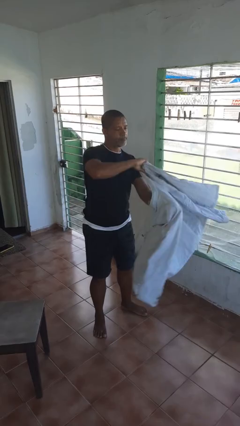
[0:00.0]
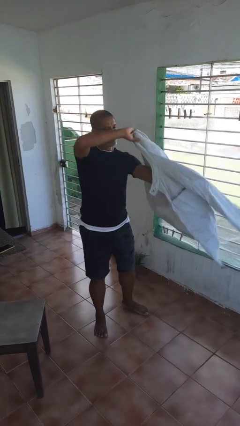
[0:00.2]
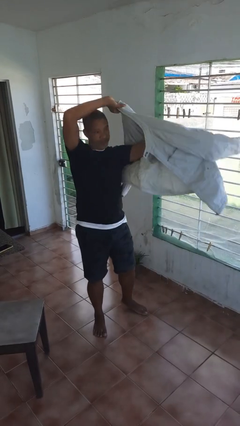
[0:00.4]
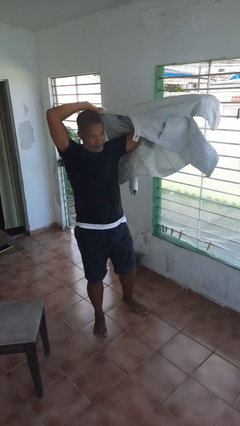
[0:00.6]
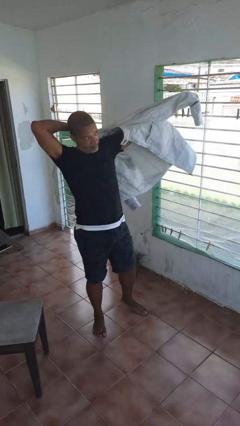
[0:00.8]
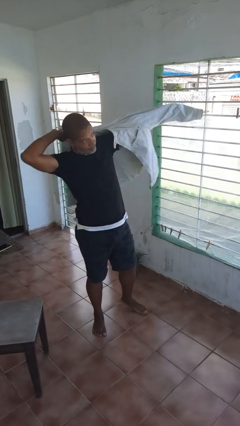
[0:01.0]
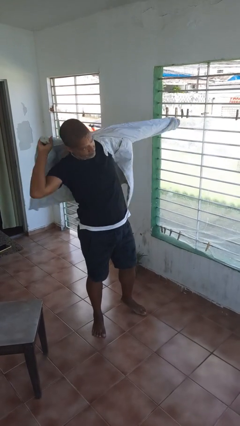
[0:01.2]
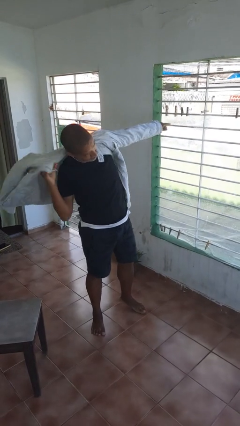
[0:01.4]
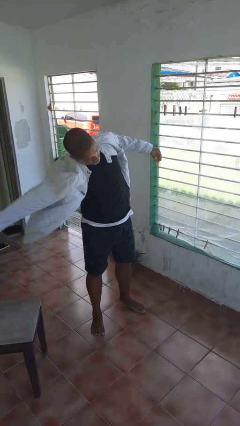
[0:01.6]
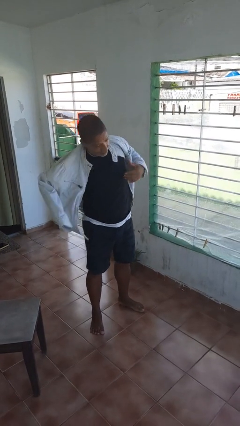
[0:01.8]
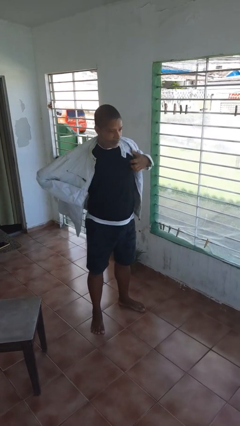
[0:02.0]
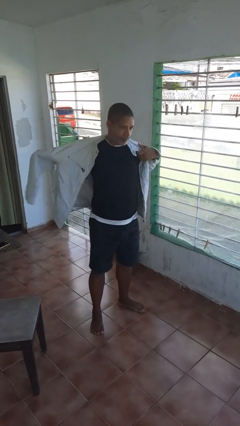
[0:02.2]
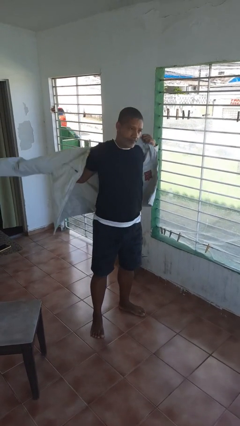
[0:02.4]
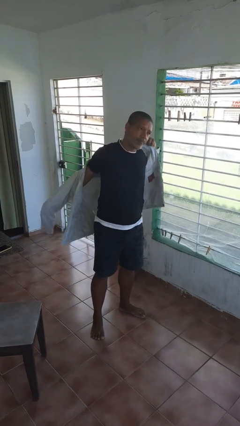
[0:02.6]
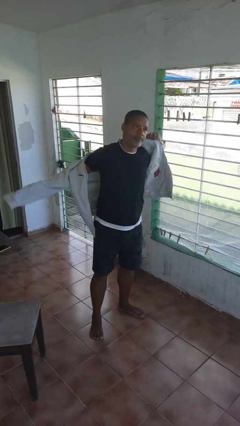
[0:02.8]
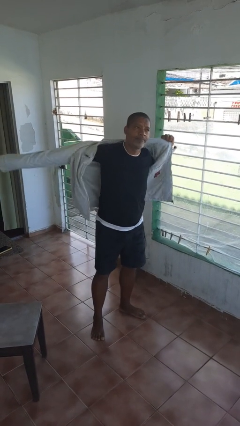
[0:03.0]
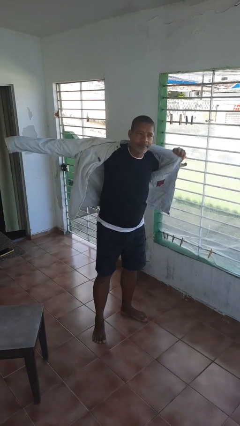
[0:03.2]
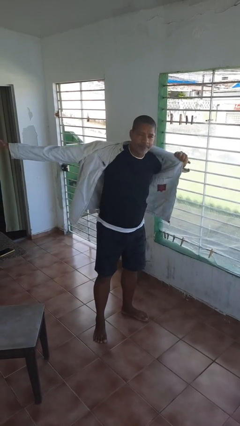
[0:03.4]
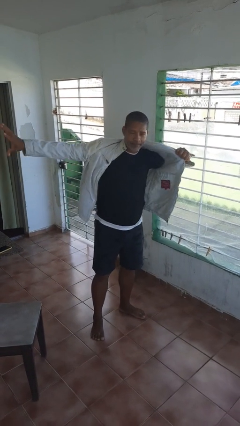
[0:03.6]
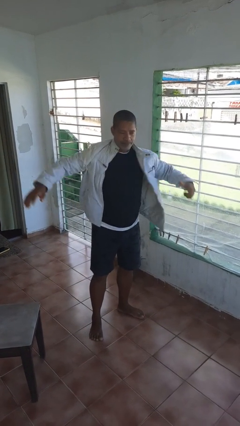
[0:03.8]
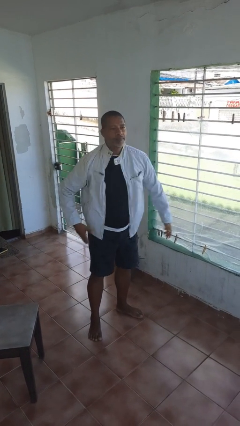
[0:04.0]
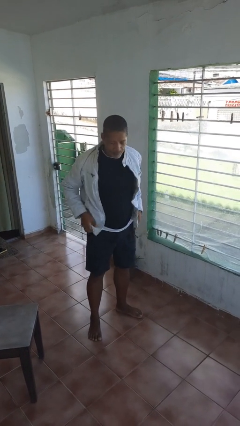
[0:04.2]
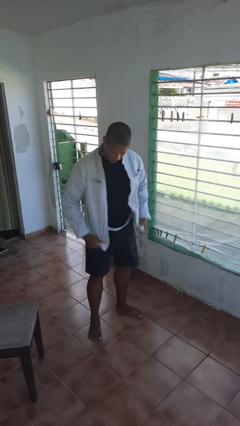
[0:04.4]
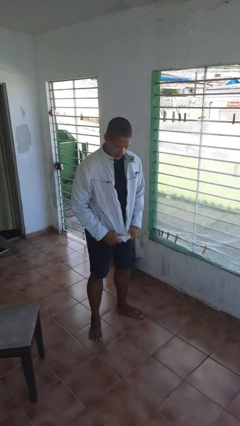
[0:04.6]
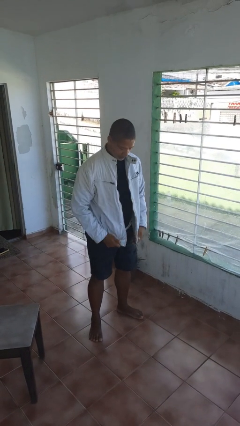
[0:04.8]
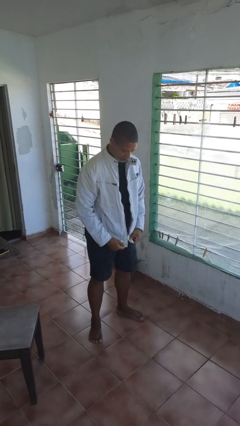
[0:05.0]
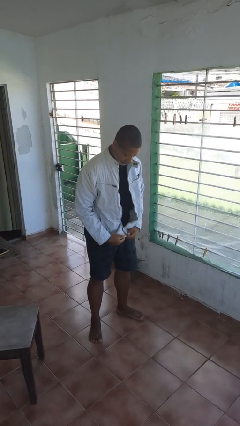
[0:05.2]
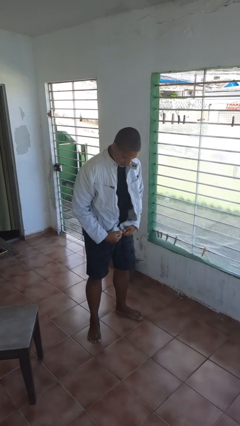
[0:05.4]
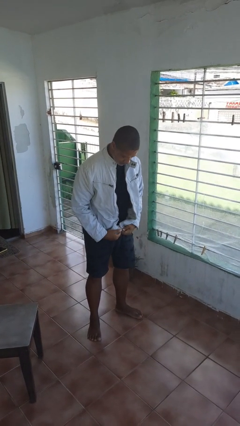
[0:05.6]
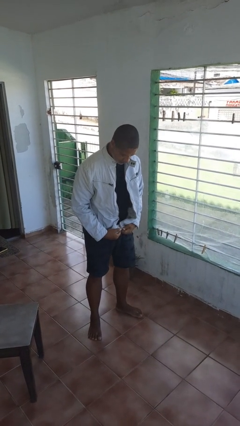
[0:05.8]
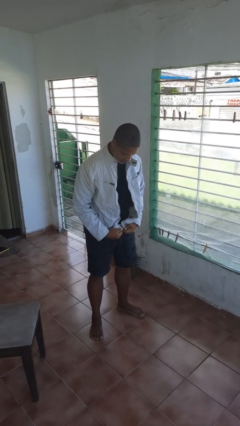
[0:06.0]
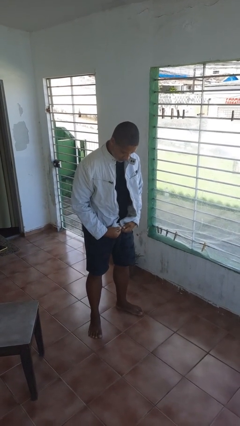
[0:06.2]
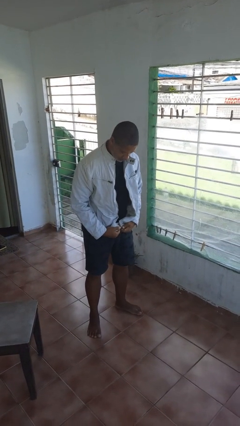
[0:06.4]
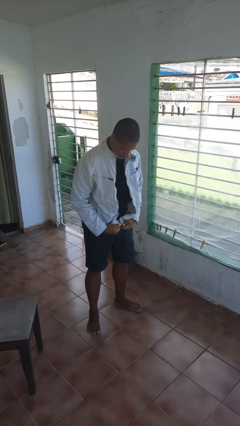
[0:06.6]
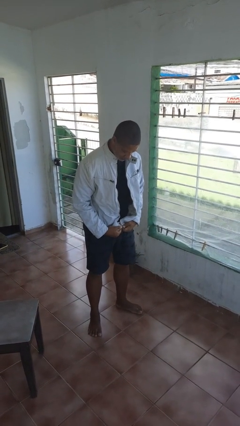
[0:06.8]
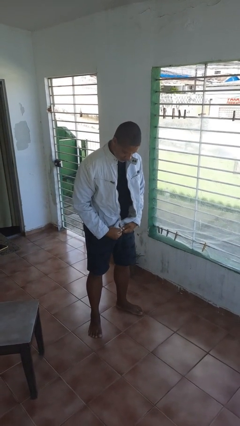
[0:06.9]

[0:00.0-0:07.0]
person puts on jacket

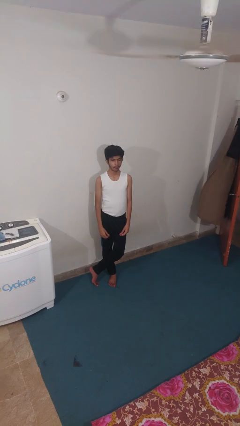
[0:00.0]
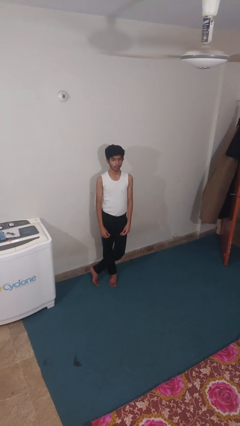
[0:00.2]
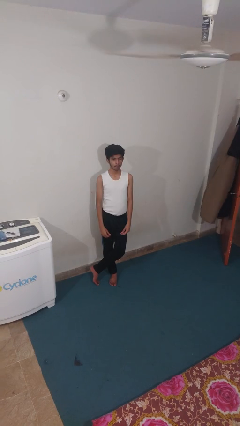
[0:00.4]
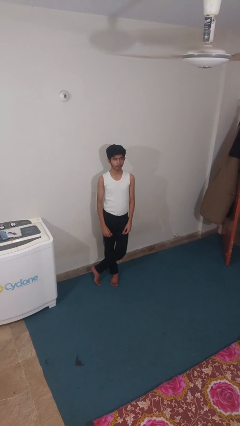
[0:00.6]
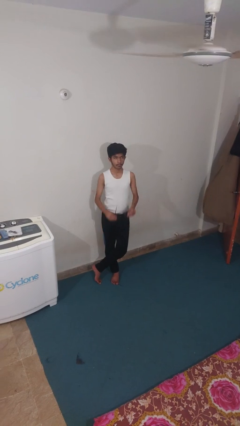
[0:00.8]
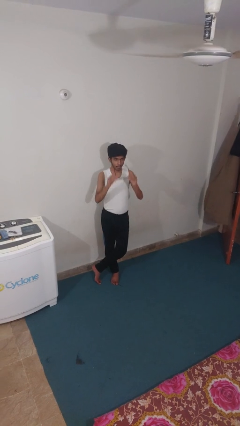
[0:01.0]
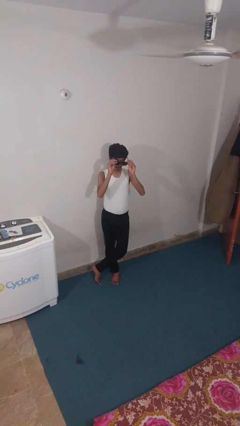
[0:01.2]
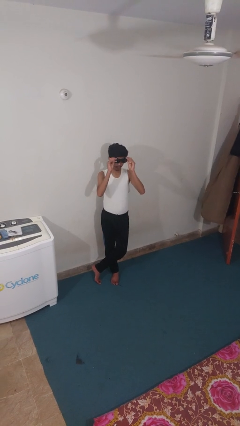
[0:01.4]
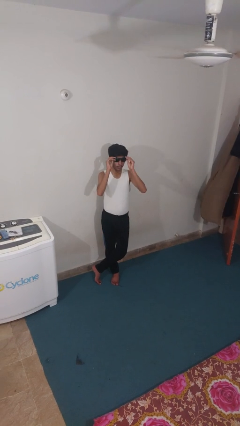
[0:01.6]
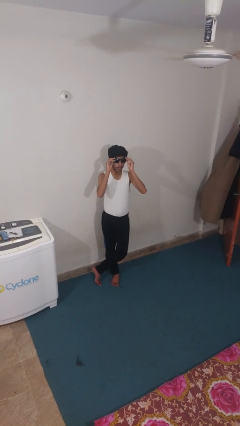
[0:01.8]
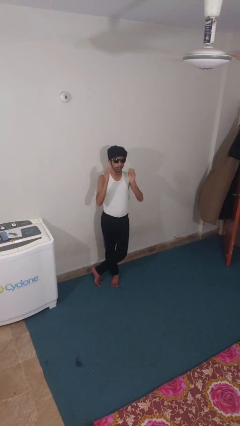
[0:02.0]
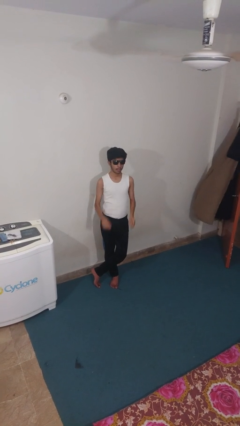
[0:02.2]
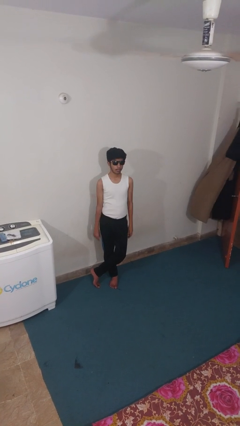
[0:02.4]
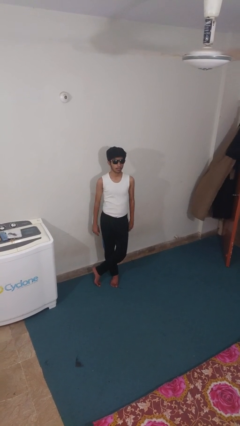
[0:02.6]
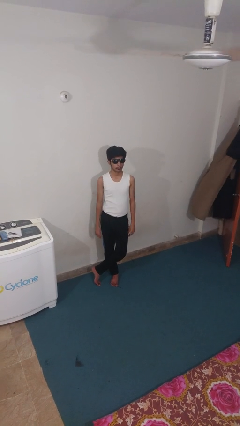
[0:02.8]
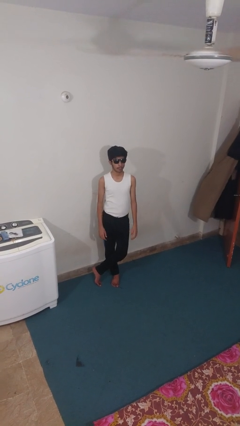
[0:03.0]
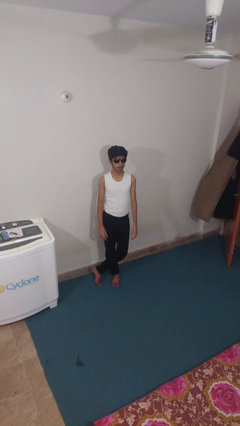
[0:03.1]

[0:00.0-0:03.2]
person puts on sunglasses

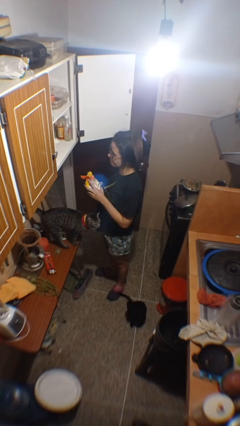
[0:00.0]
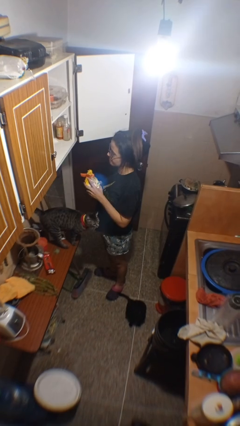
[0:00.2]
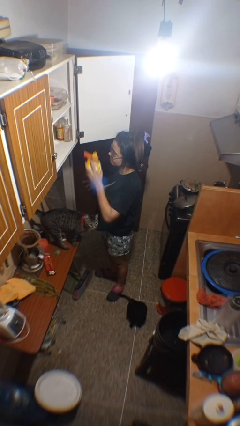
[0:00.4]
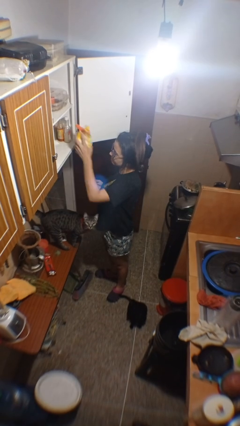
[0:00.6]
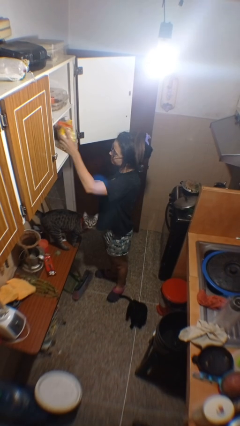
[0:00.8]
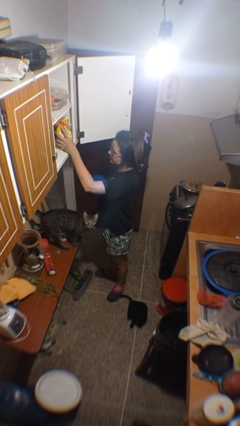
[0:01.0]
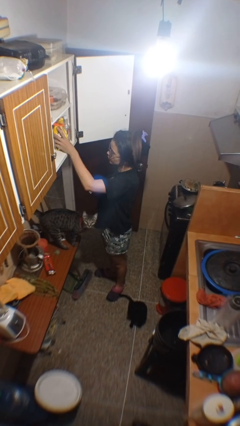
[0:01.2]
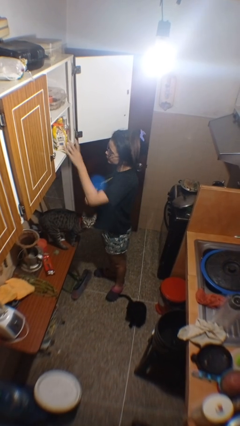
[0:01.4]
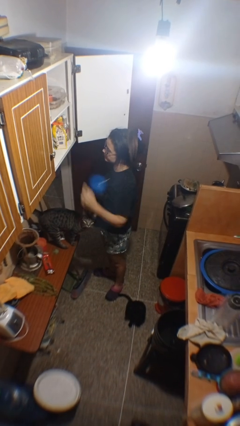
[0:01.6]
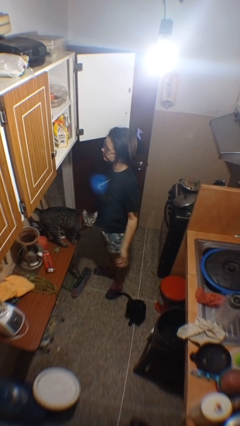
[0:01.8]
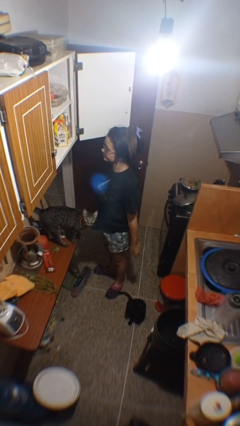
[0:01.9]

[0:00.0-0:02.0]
person puts down object into cabinet

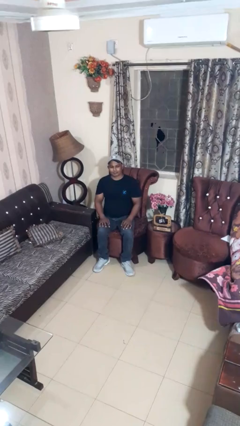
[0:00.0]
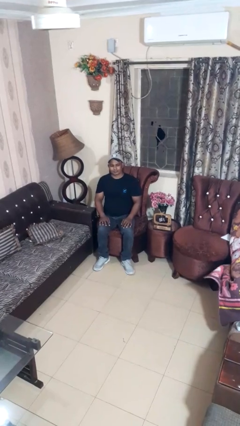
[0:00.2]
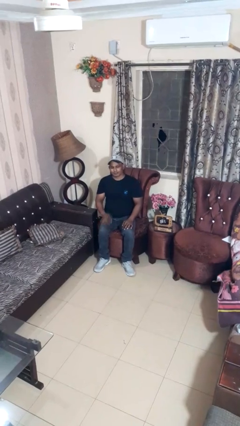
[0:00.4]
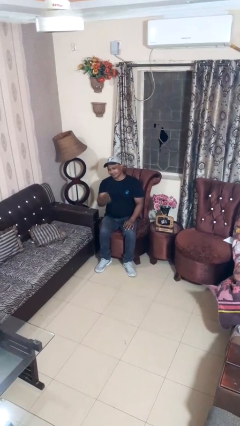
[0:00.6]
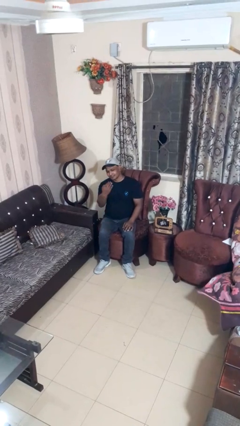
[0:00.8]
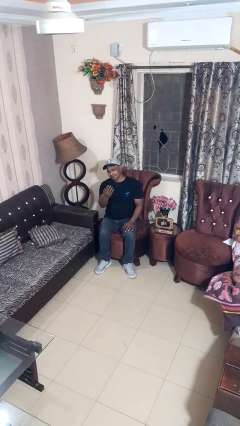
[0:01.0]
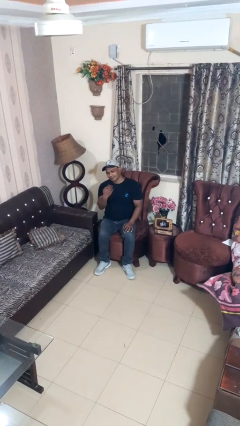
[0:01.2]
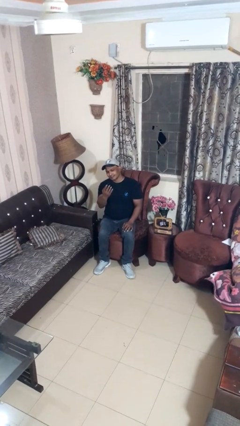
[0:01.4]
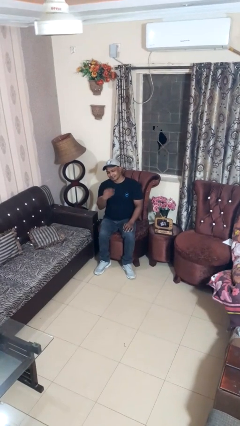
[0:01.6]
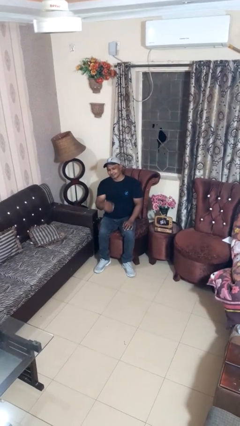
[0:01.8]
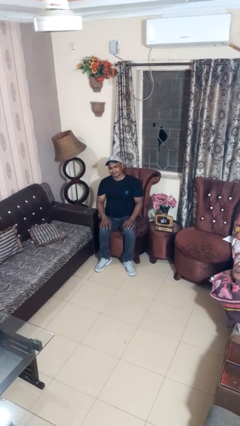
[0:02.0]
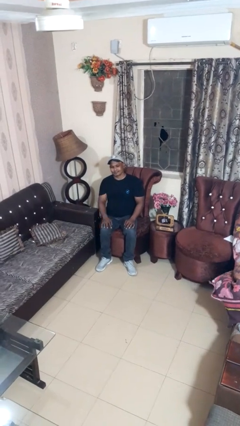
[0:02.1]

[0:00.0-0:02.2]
person gestures come here

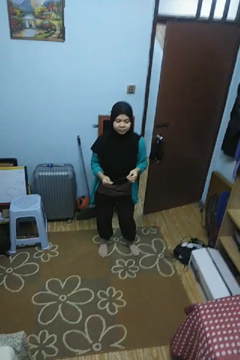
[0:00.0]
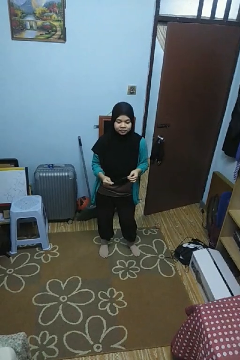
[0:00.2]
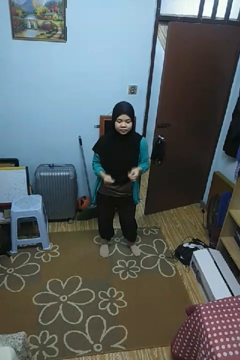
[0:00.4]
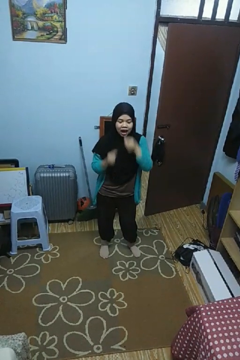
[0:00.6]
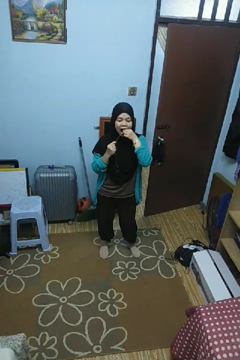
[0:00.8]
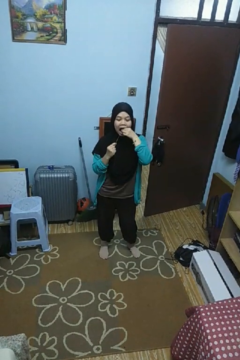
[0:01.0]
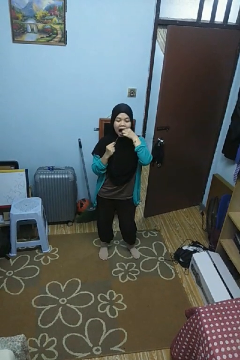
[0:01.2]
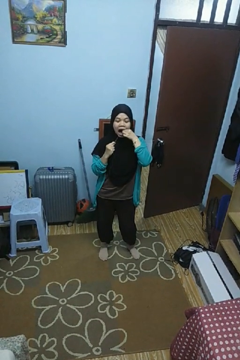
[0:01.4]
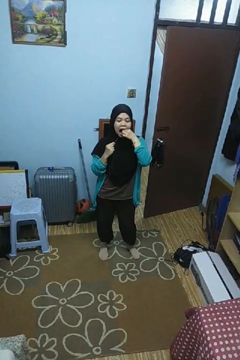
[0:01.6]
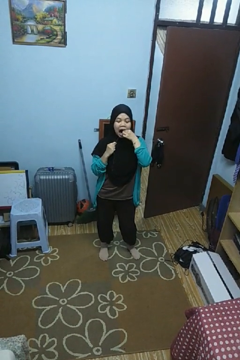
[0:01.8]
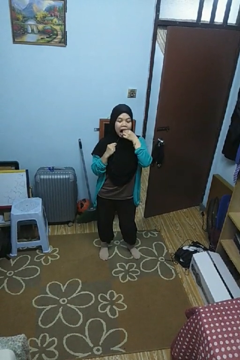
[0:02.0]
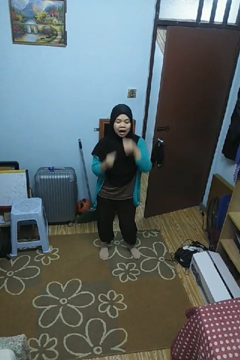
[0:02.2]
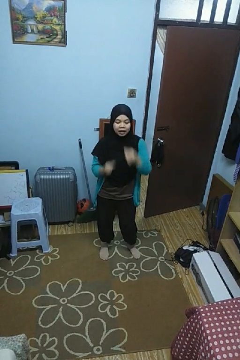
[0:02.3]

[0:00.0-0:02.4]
person flosses

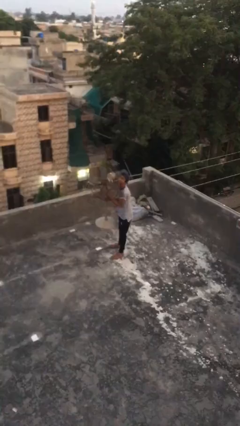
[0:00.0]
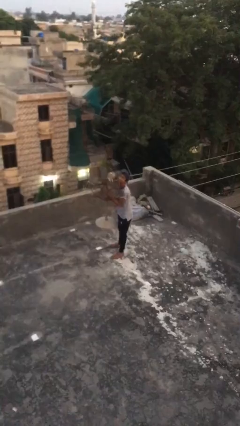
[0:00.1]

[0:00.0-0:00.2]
person carries heavy object

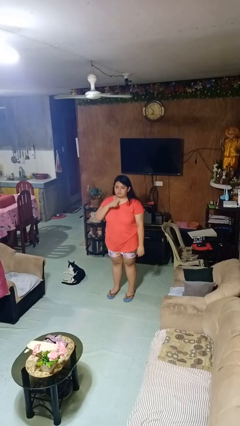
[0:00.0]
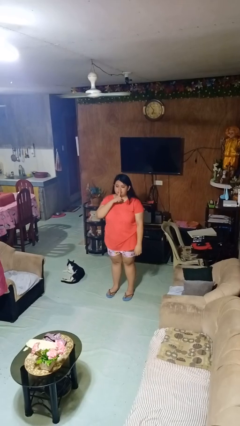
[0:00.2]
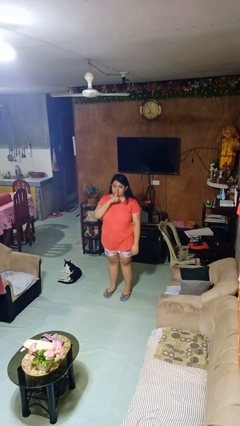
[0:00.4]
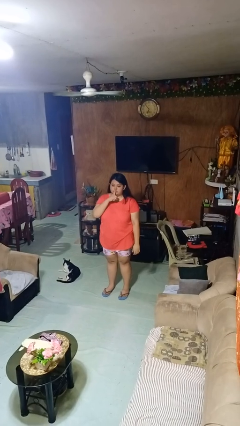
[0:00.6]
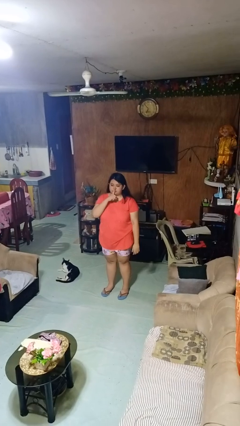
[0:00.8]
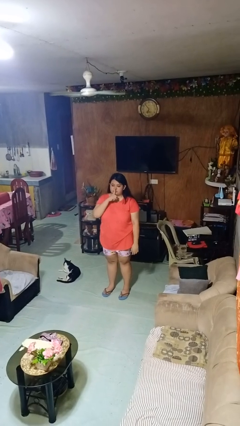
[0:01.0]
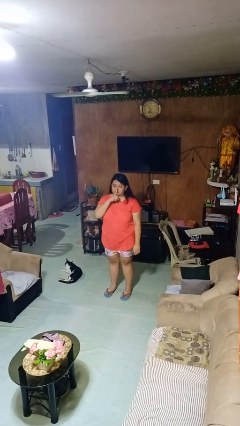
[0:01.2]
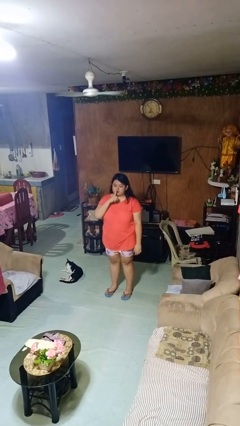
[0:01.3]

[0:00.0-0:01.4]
person gestures be quiet
